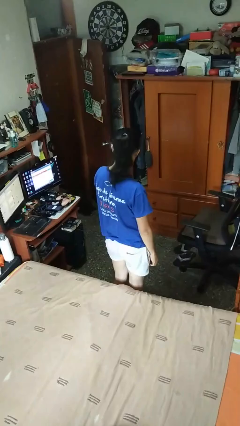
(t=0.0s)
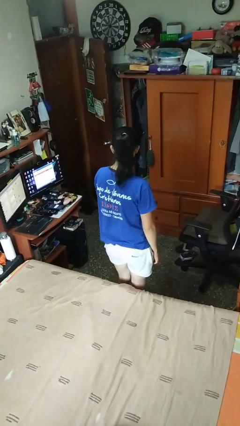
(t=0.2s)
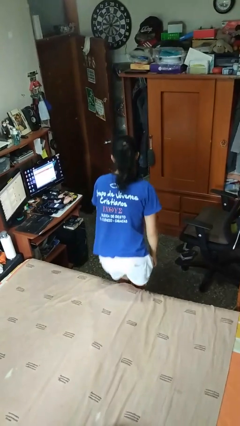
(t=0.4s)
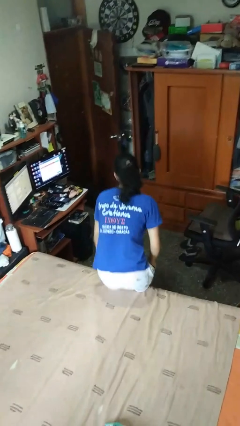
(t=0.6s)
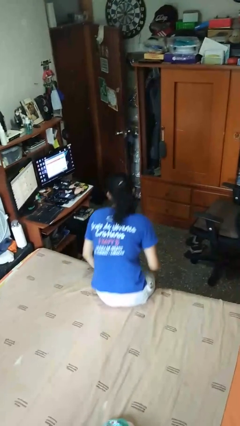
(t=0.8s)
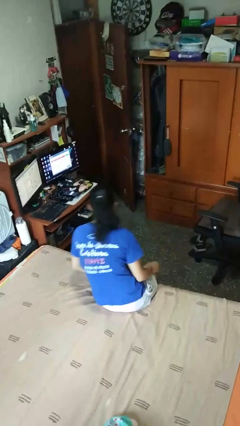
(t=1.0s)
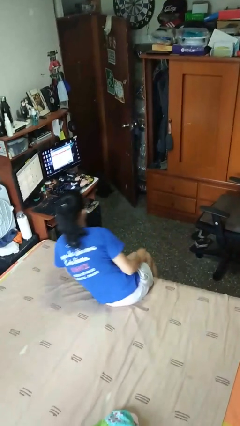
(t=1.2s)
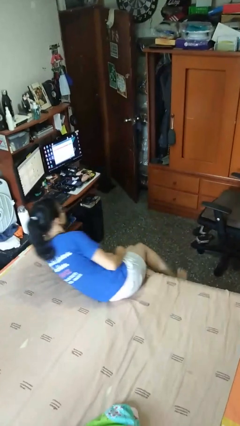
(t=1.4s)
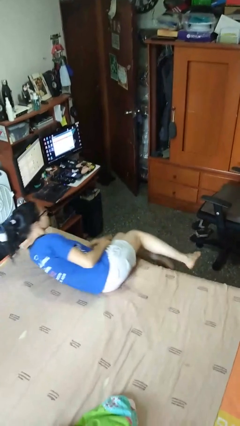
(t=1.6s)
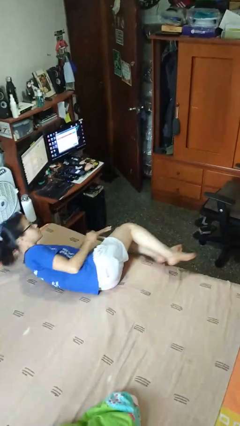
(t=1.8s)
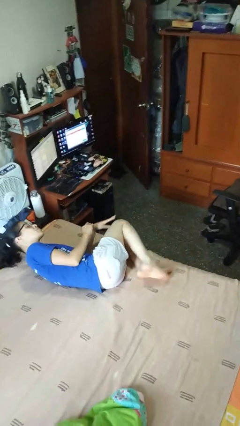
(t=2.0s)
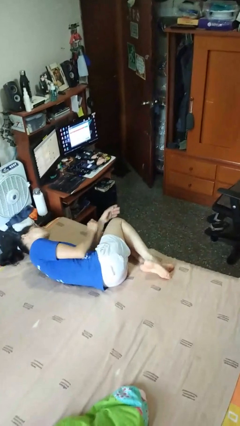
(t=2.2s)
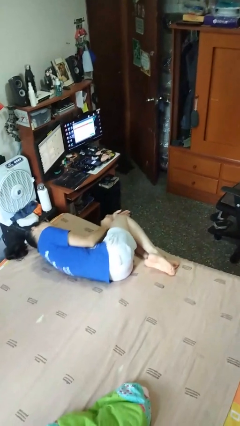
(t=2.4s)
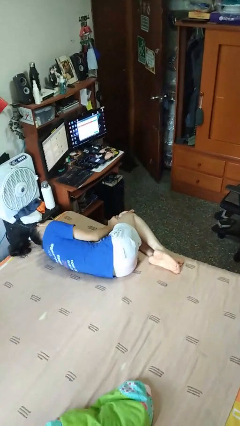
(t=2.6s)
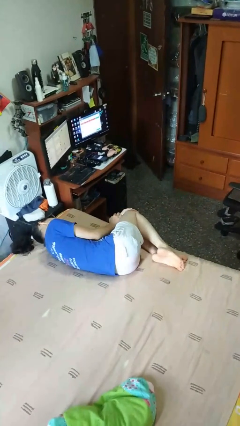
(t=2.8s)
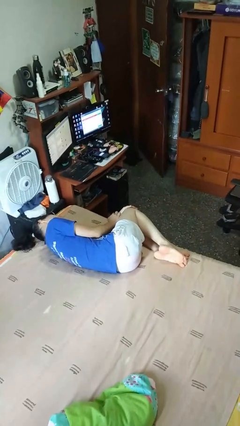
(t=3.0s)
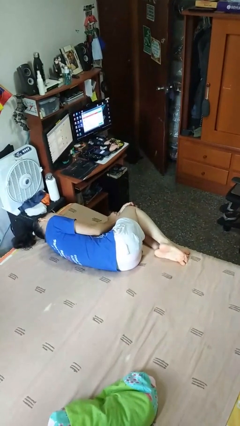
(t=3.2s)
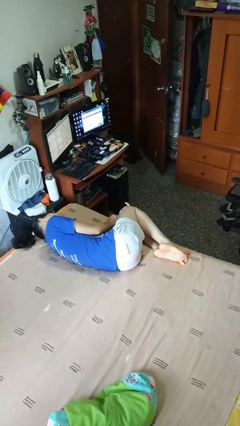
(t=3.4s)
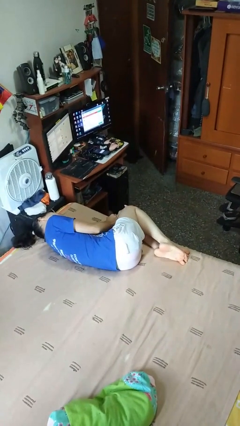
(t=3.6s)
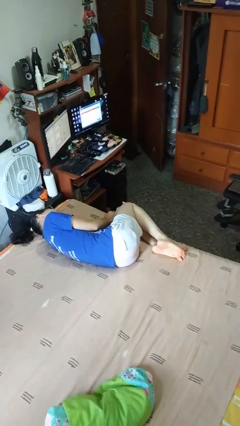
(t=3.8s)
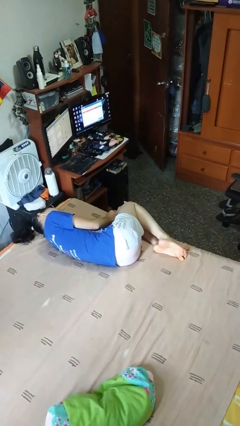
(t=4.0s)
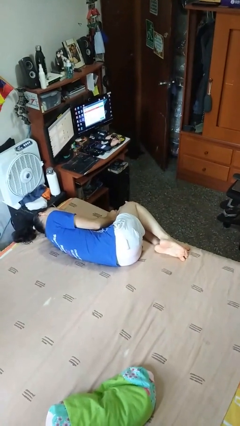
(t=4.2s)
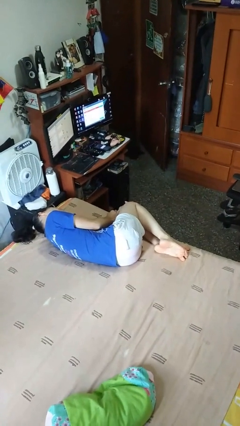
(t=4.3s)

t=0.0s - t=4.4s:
person lies down on bed

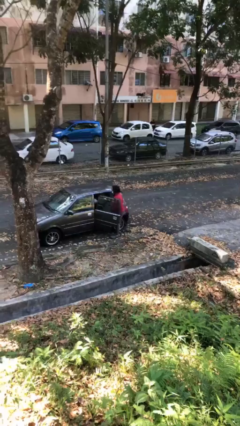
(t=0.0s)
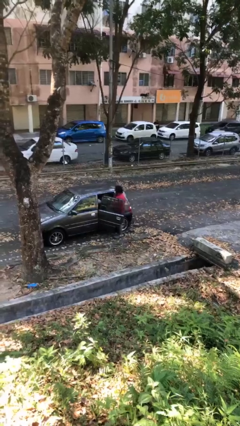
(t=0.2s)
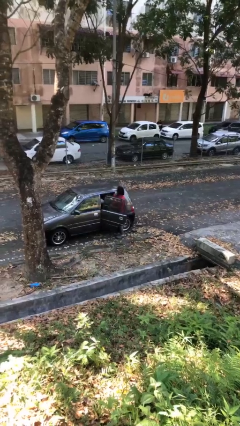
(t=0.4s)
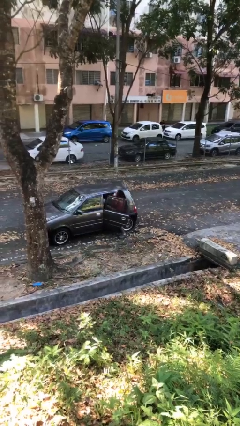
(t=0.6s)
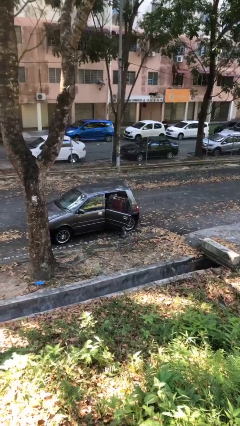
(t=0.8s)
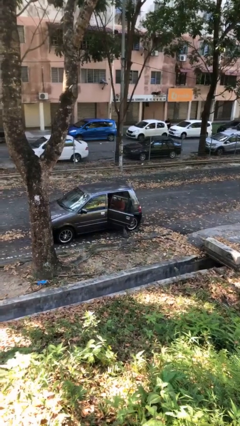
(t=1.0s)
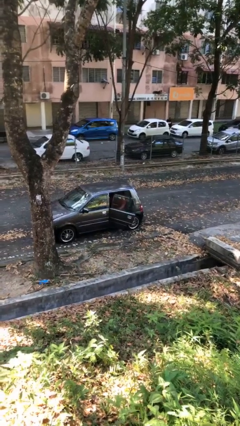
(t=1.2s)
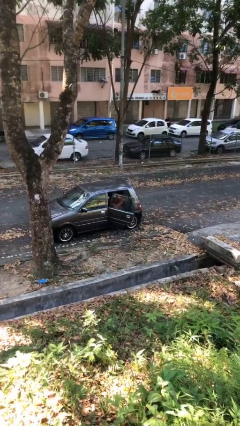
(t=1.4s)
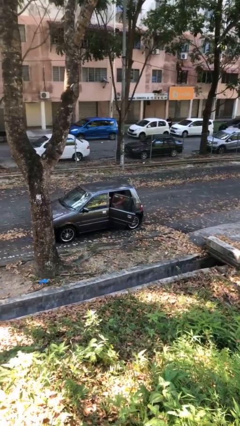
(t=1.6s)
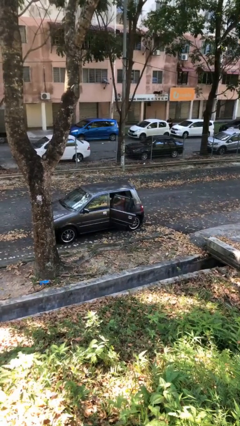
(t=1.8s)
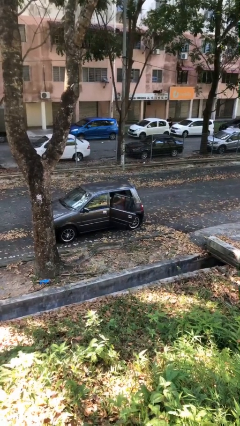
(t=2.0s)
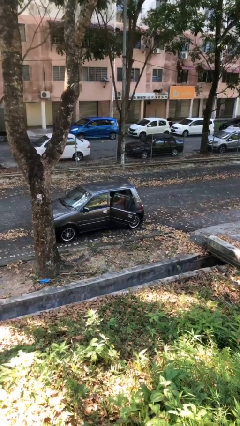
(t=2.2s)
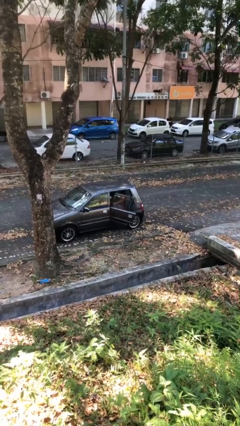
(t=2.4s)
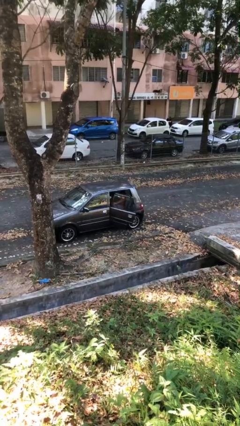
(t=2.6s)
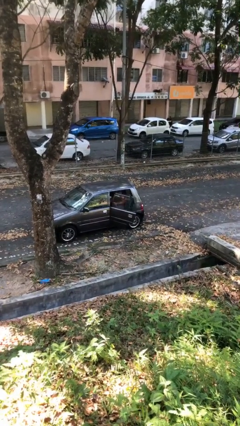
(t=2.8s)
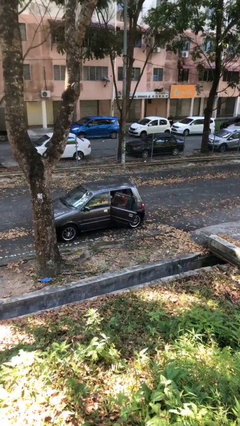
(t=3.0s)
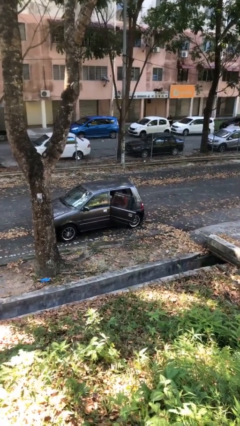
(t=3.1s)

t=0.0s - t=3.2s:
person enters car

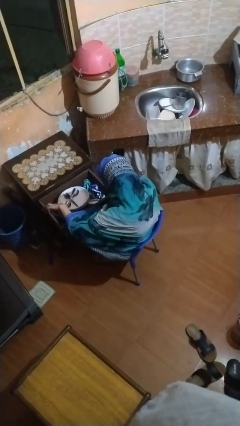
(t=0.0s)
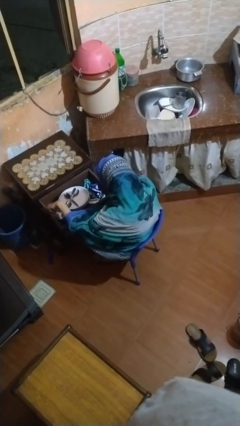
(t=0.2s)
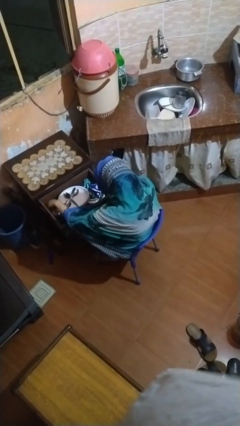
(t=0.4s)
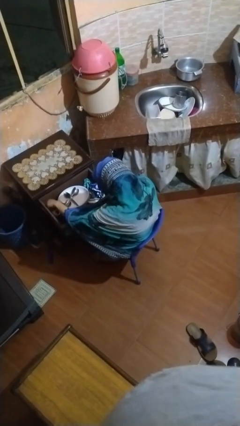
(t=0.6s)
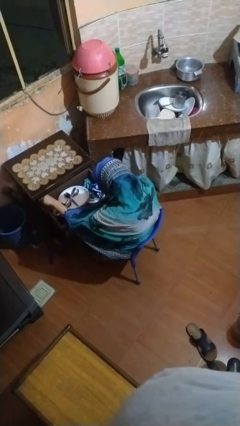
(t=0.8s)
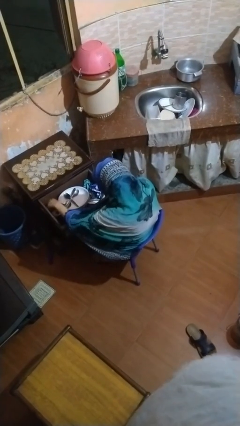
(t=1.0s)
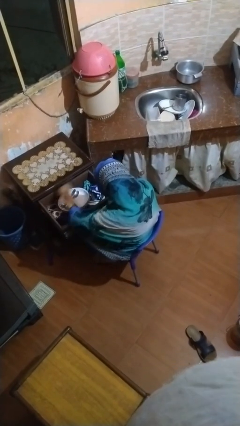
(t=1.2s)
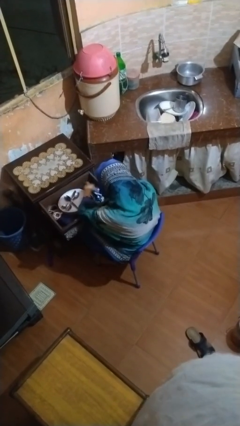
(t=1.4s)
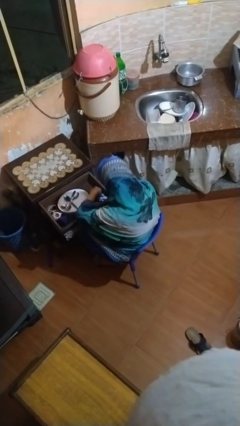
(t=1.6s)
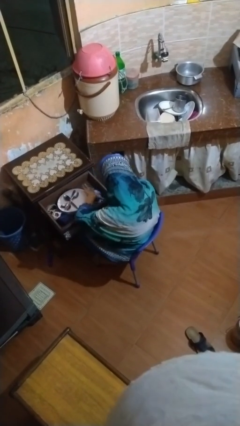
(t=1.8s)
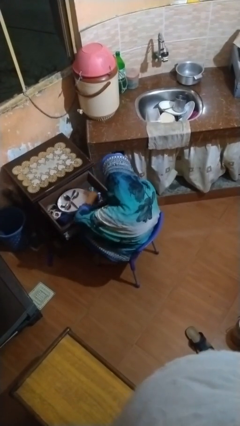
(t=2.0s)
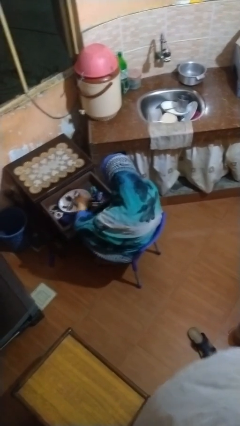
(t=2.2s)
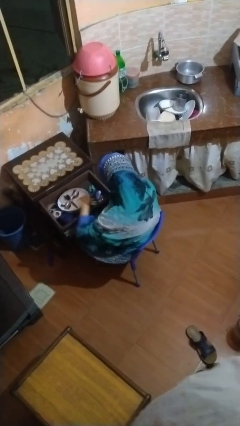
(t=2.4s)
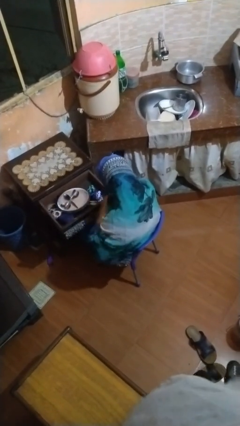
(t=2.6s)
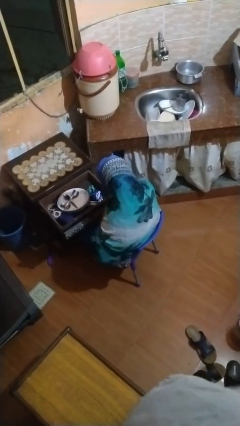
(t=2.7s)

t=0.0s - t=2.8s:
person searches in kitchen drawer

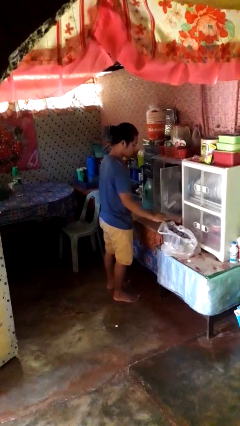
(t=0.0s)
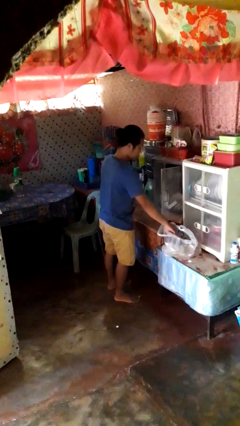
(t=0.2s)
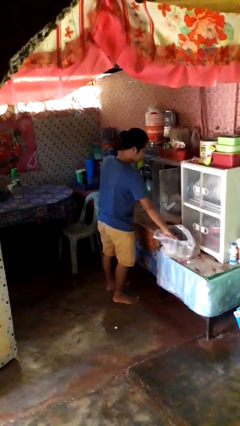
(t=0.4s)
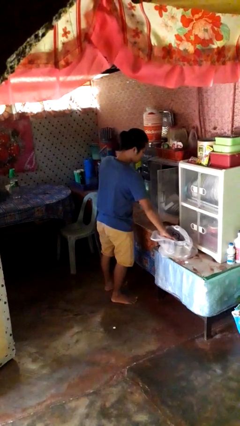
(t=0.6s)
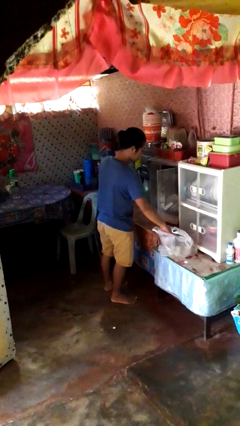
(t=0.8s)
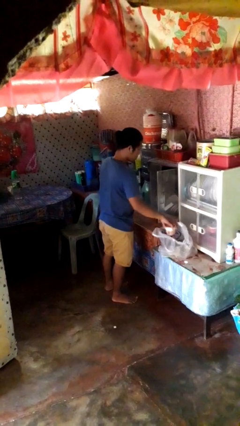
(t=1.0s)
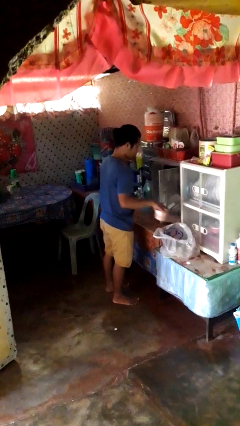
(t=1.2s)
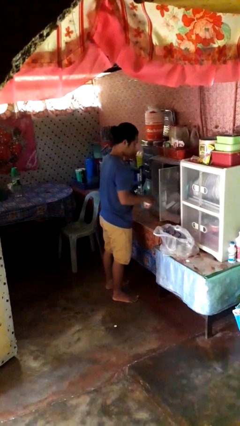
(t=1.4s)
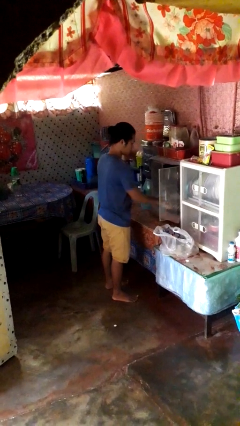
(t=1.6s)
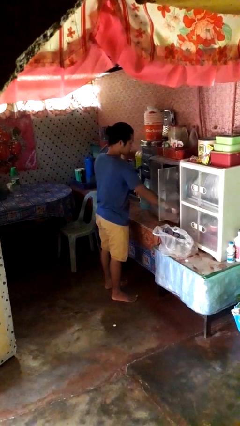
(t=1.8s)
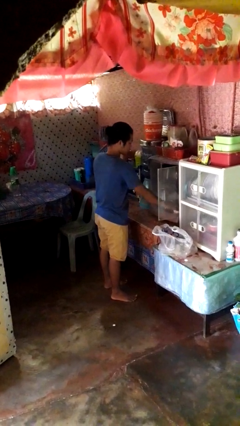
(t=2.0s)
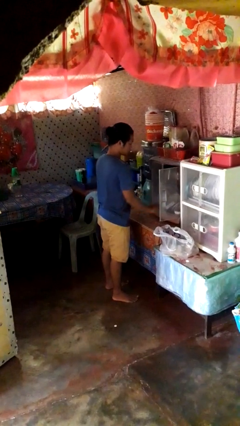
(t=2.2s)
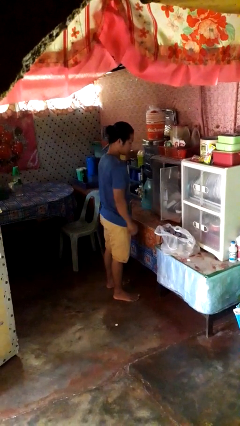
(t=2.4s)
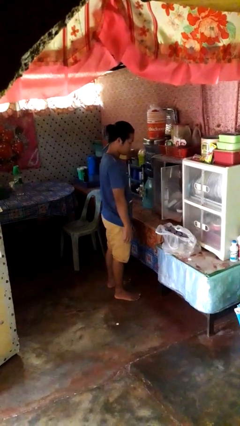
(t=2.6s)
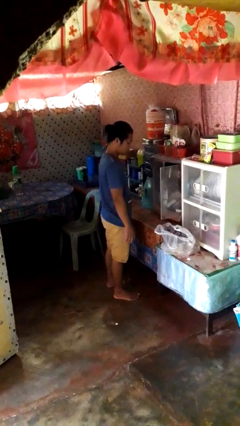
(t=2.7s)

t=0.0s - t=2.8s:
person loads groceries into cabinet

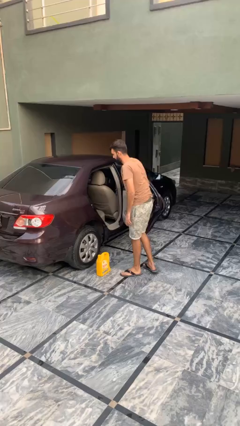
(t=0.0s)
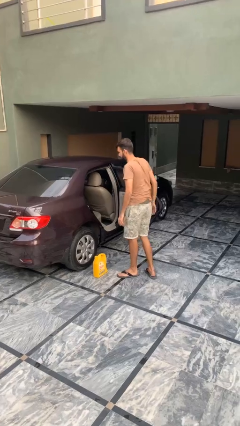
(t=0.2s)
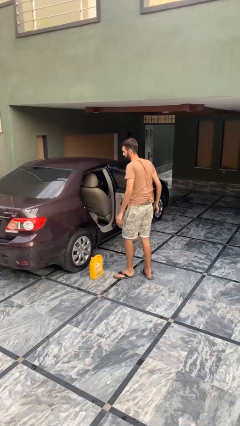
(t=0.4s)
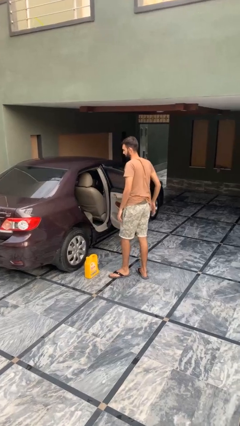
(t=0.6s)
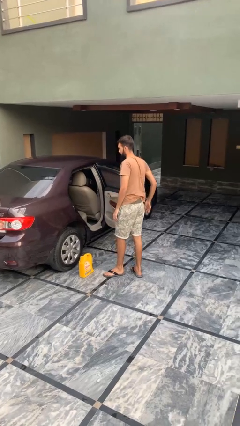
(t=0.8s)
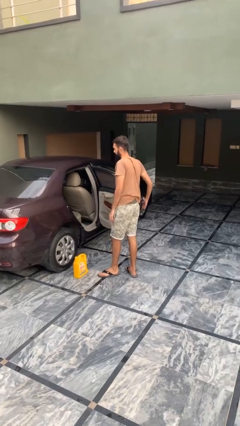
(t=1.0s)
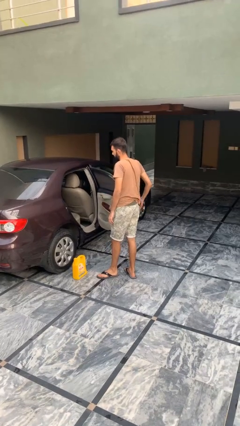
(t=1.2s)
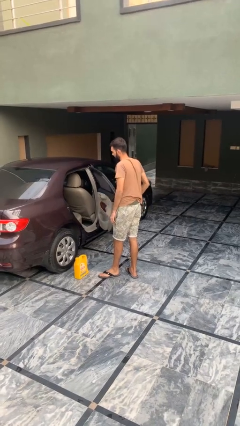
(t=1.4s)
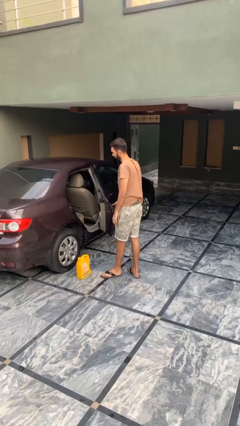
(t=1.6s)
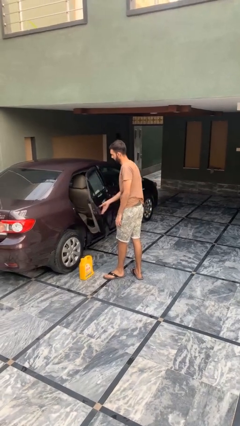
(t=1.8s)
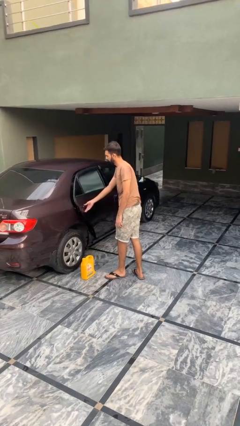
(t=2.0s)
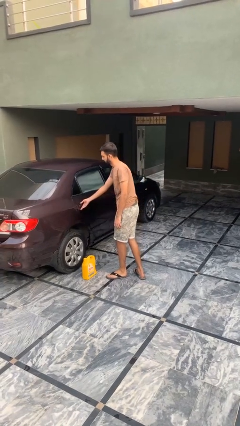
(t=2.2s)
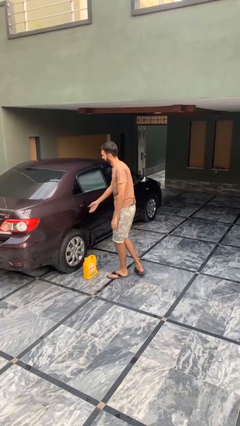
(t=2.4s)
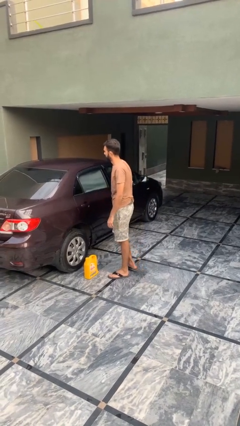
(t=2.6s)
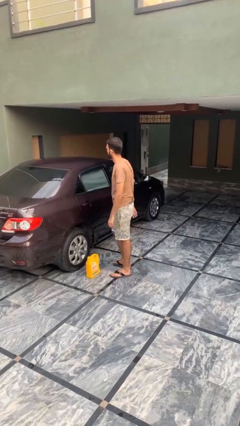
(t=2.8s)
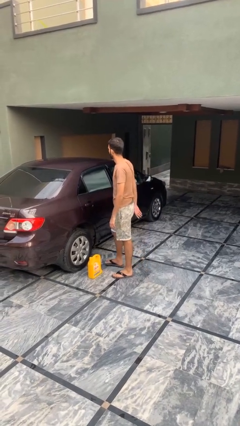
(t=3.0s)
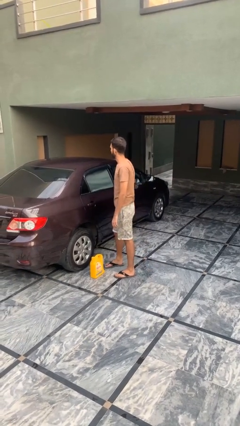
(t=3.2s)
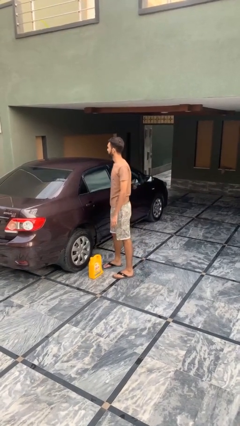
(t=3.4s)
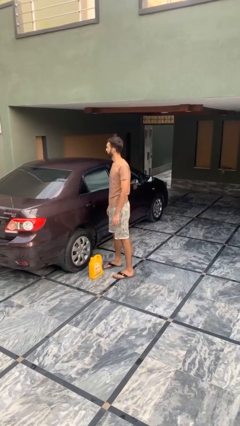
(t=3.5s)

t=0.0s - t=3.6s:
person closes car door

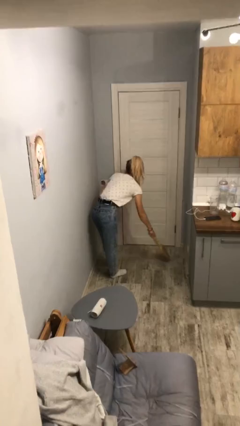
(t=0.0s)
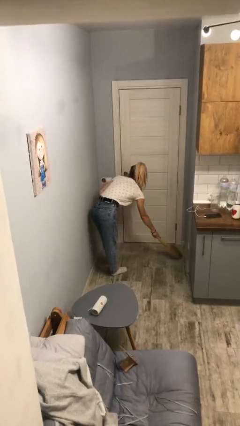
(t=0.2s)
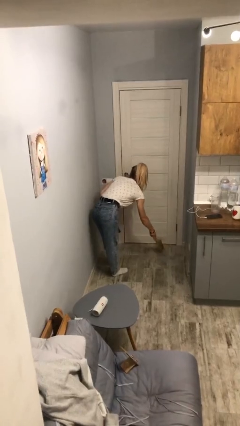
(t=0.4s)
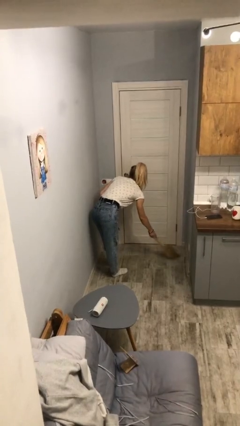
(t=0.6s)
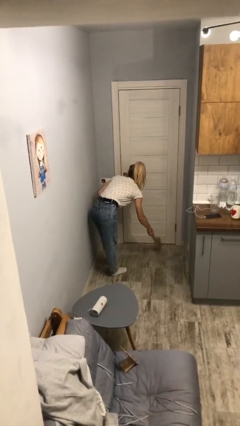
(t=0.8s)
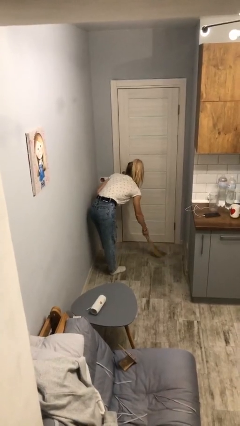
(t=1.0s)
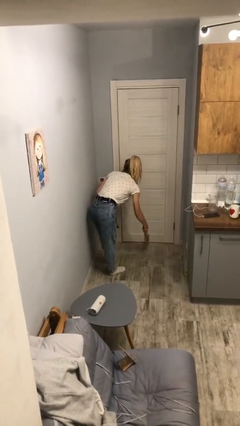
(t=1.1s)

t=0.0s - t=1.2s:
person sweeps floor
